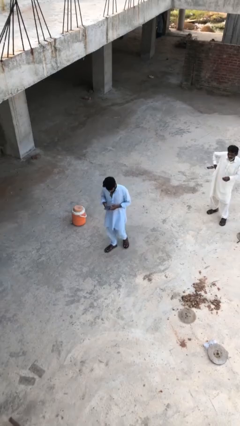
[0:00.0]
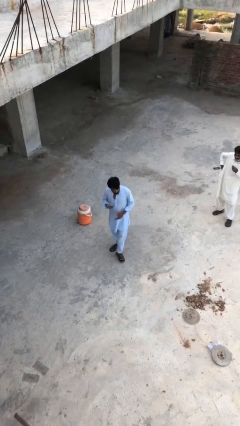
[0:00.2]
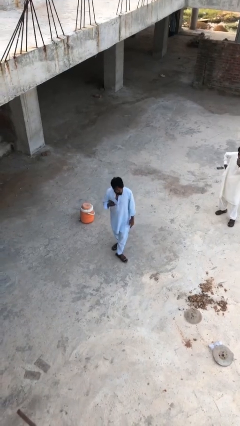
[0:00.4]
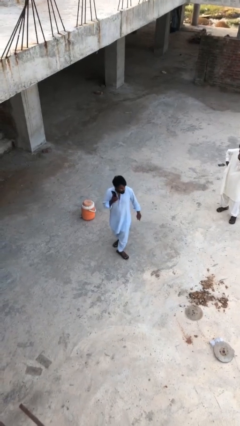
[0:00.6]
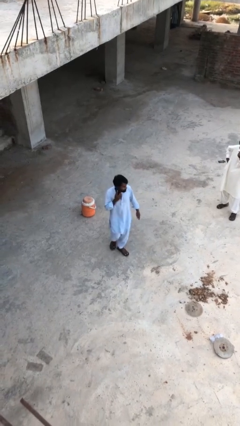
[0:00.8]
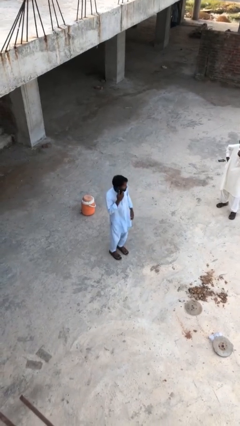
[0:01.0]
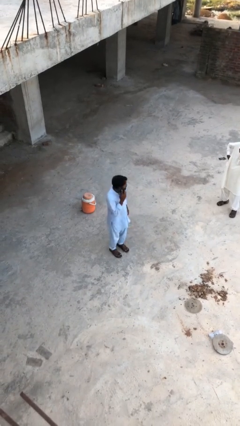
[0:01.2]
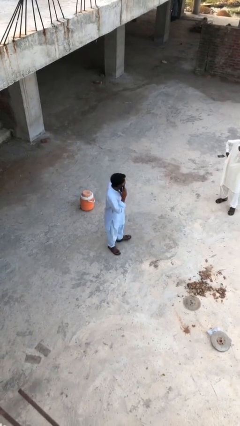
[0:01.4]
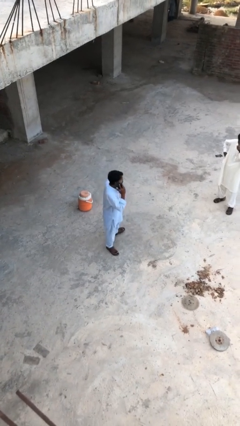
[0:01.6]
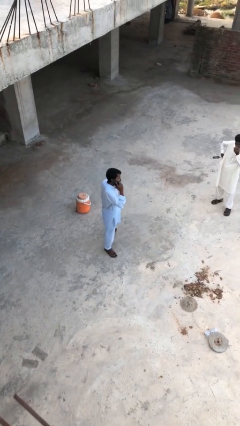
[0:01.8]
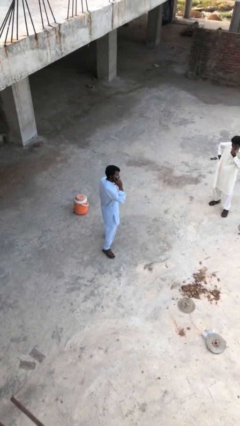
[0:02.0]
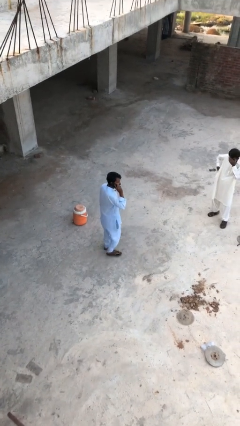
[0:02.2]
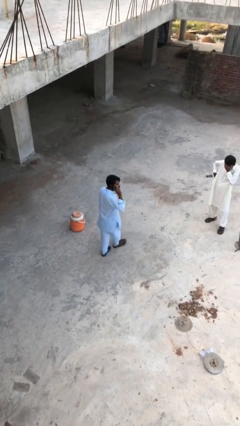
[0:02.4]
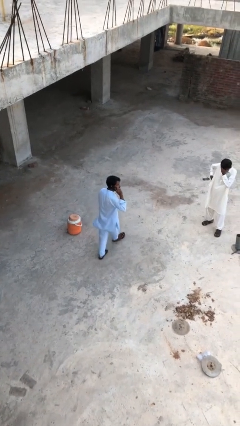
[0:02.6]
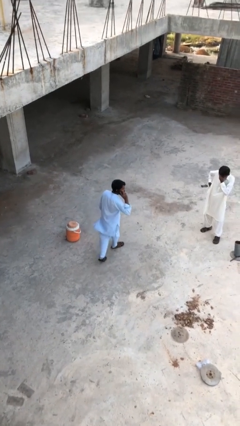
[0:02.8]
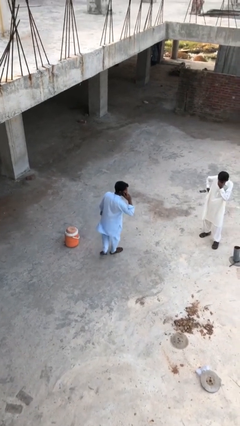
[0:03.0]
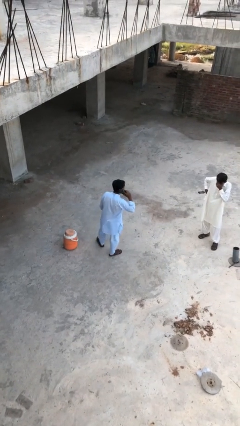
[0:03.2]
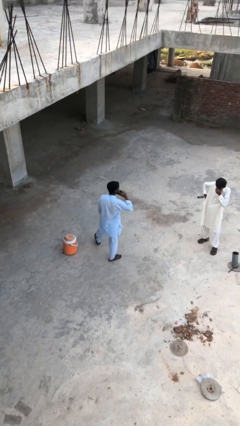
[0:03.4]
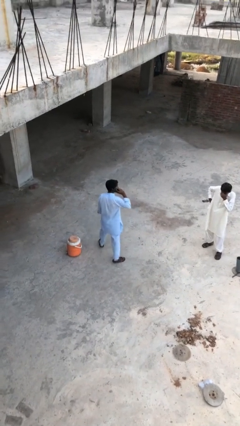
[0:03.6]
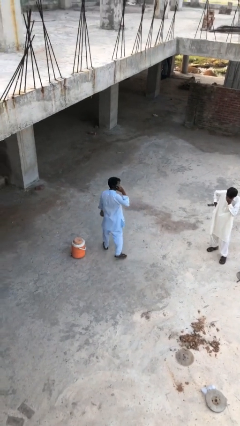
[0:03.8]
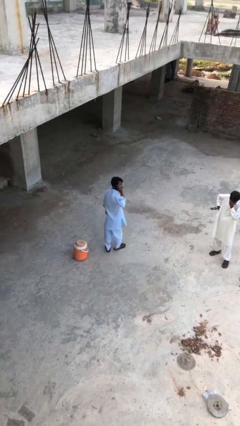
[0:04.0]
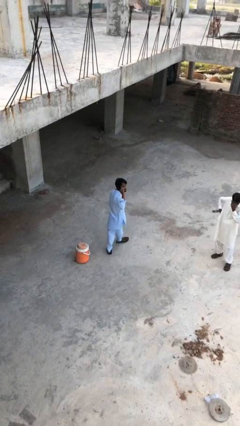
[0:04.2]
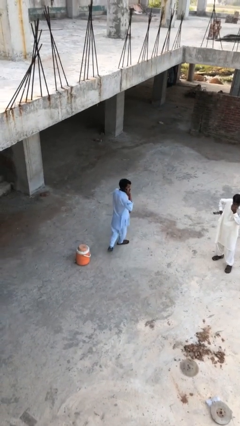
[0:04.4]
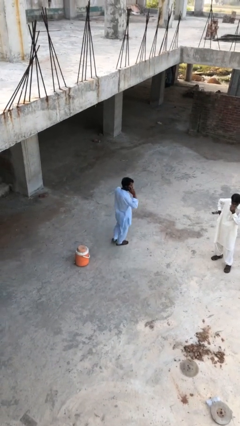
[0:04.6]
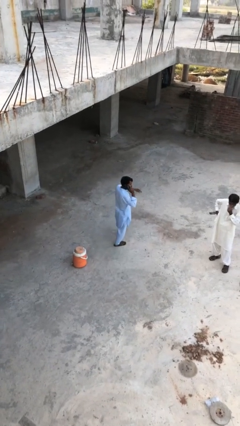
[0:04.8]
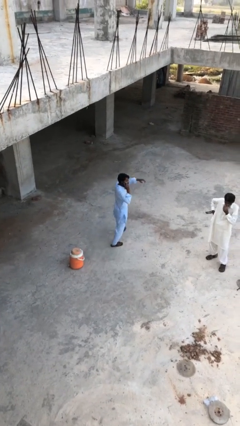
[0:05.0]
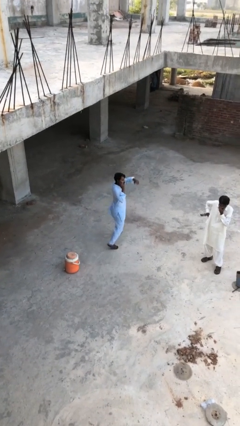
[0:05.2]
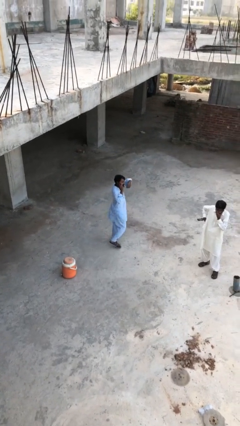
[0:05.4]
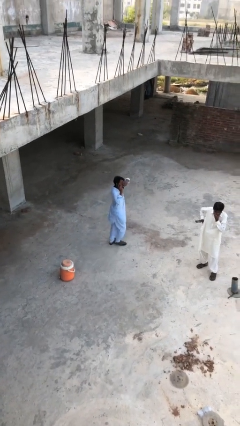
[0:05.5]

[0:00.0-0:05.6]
person talks on phone

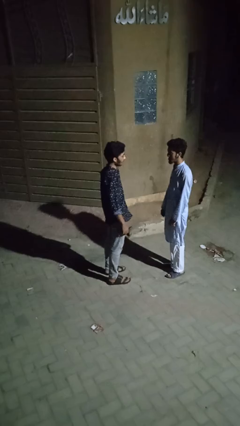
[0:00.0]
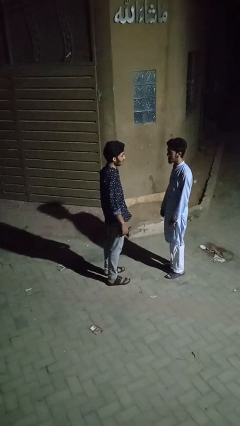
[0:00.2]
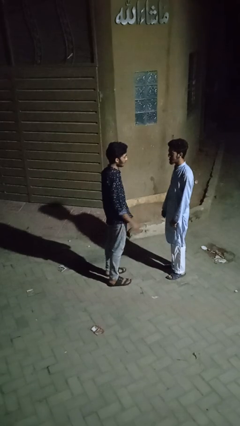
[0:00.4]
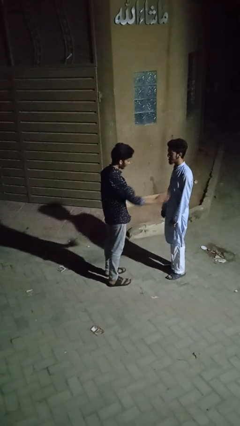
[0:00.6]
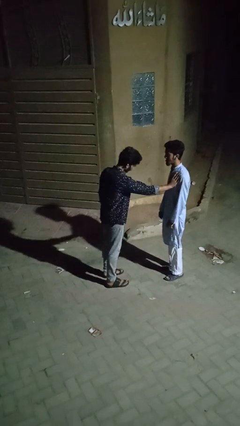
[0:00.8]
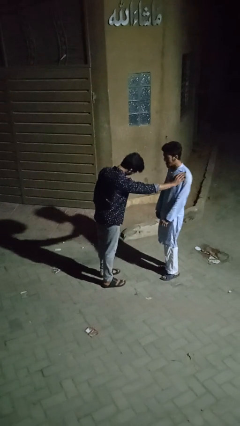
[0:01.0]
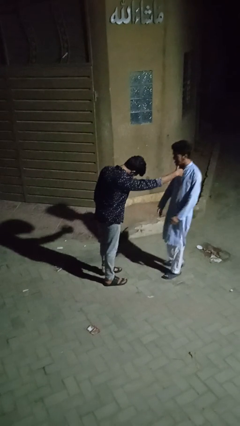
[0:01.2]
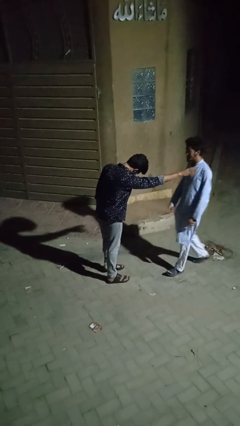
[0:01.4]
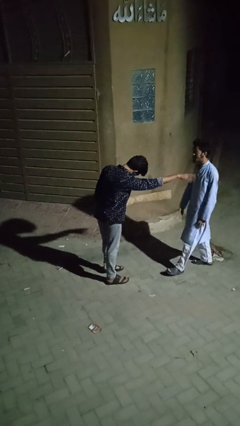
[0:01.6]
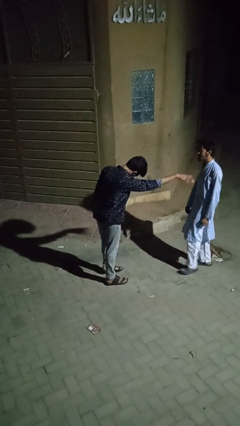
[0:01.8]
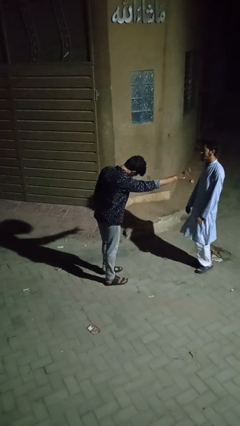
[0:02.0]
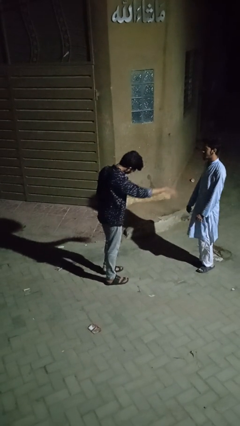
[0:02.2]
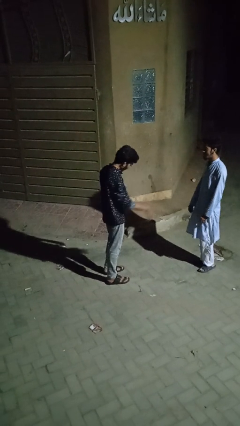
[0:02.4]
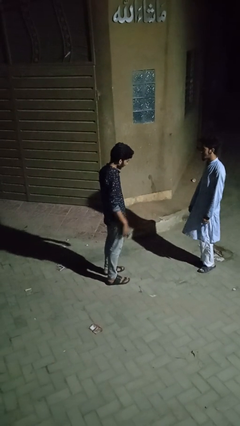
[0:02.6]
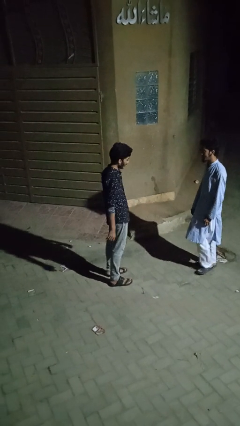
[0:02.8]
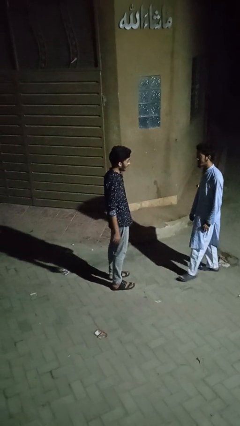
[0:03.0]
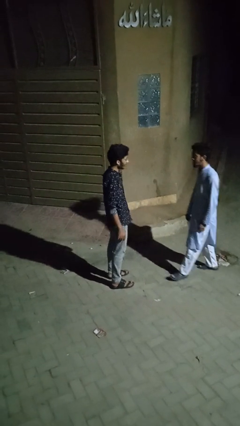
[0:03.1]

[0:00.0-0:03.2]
person shoves person

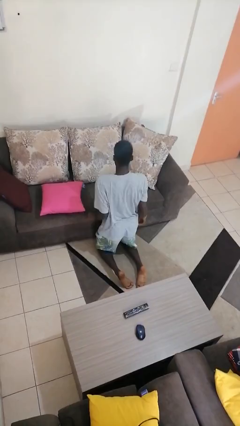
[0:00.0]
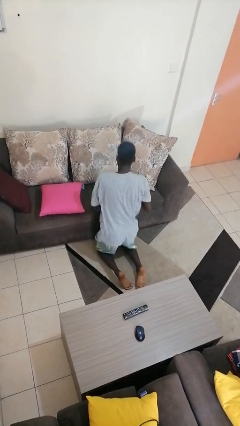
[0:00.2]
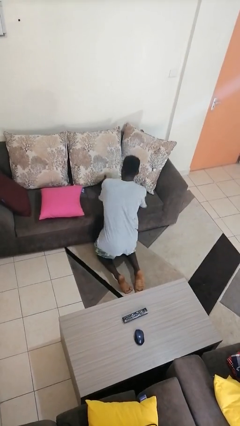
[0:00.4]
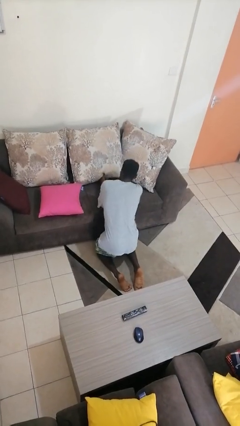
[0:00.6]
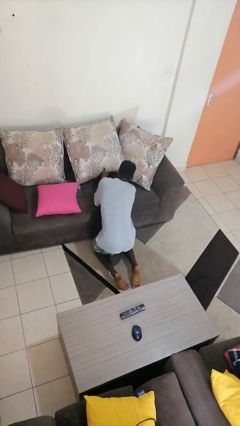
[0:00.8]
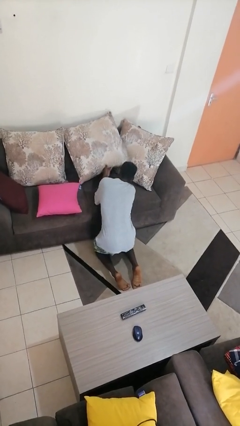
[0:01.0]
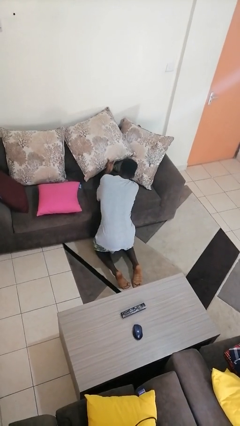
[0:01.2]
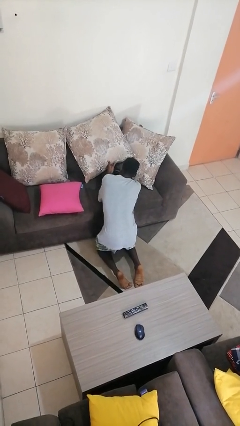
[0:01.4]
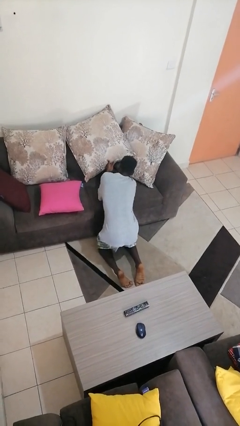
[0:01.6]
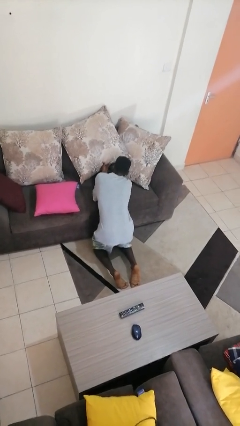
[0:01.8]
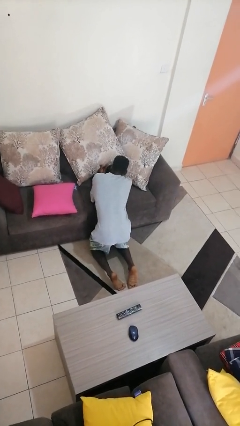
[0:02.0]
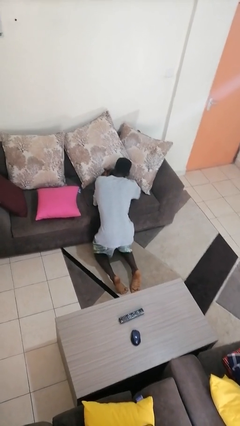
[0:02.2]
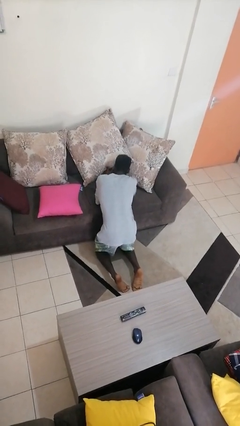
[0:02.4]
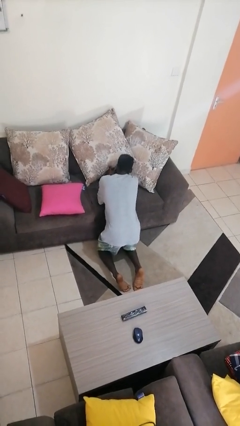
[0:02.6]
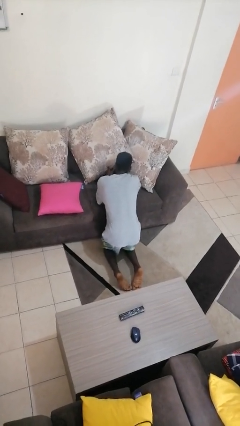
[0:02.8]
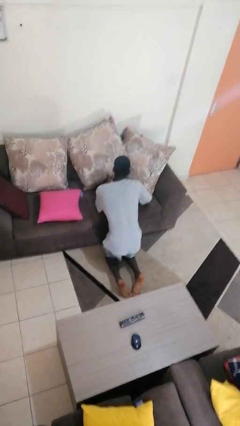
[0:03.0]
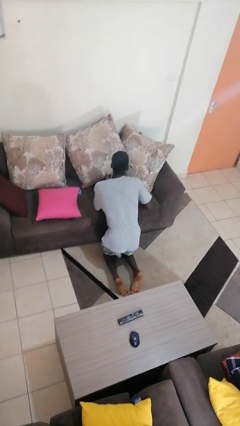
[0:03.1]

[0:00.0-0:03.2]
person searches in couch

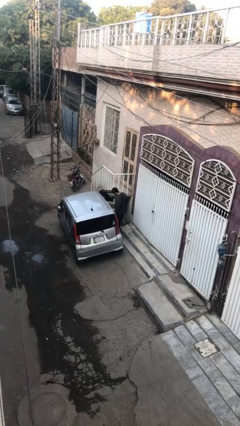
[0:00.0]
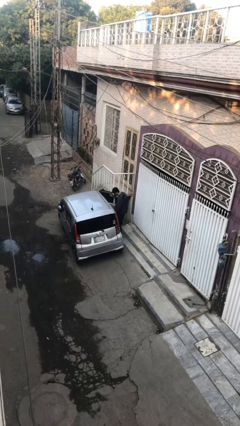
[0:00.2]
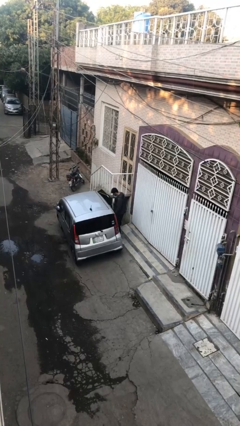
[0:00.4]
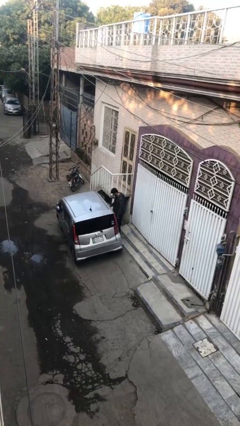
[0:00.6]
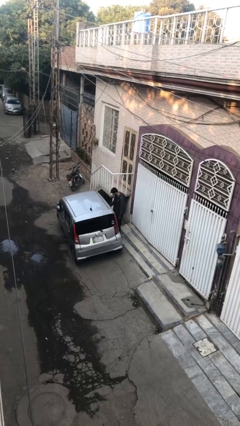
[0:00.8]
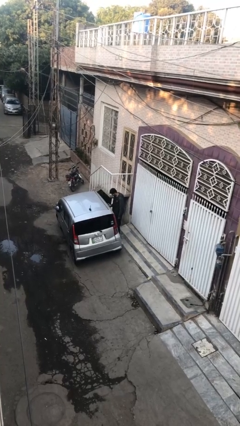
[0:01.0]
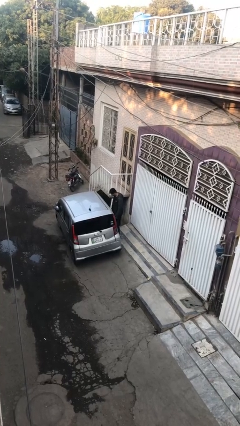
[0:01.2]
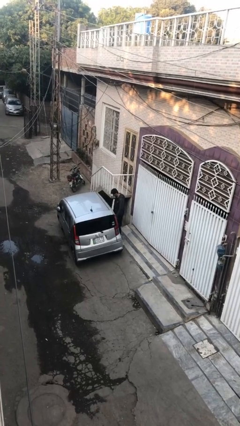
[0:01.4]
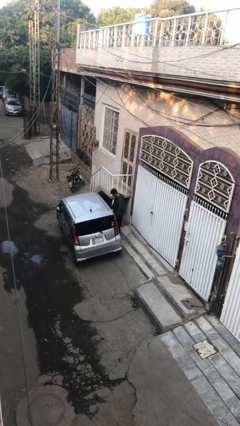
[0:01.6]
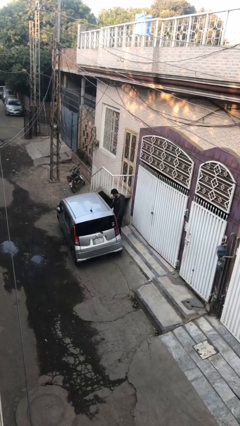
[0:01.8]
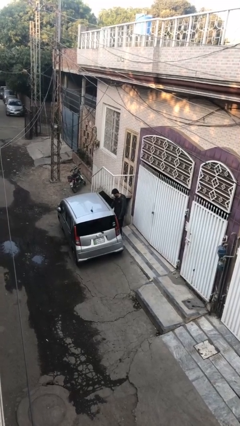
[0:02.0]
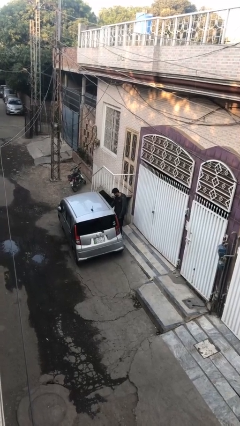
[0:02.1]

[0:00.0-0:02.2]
person closes car door

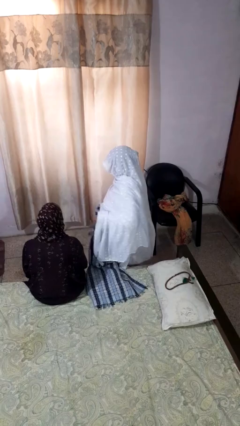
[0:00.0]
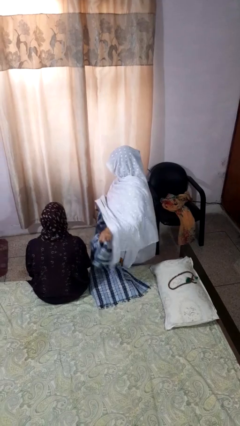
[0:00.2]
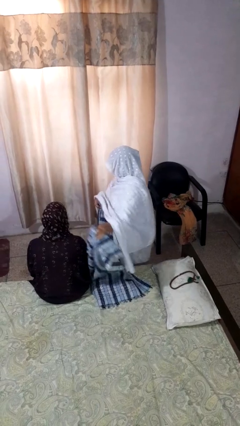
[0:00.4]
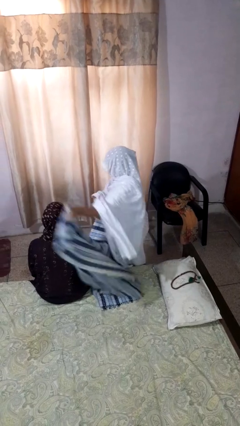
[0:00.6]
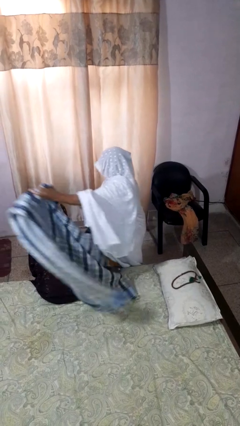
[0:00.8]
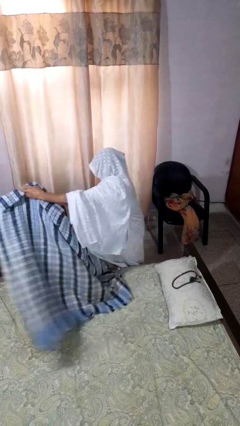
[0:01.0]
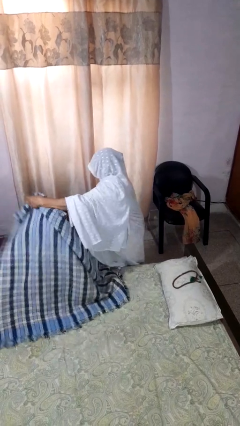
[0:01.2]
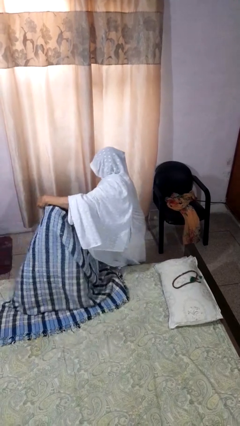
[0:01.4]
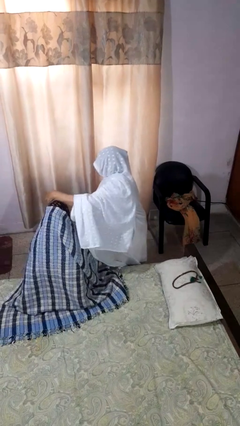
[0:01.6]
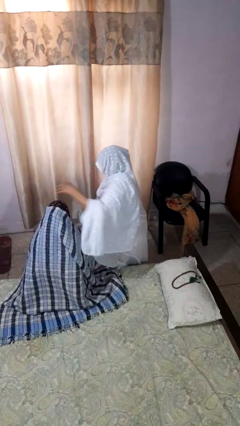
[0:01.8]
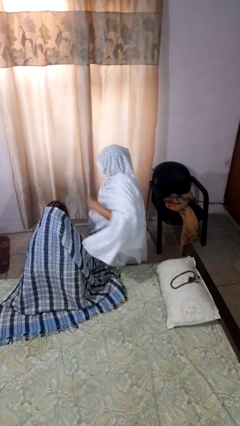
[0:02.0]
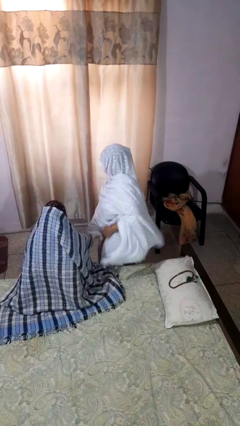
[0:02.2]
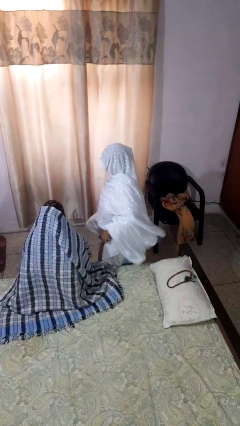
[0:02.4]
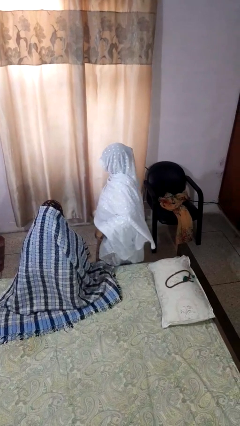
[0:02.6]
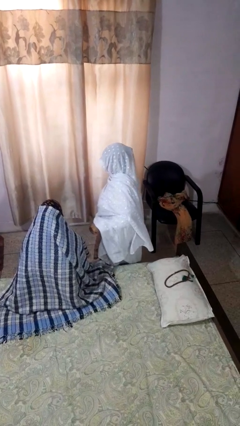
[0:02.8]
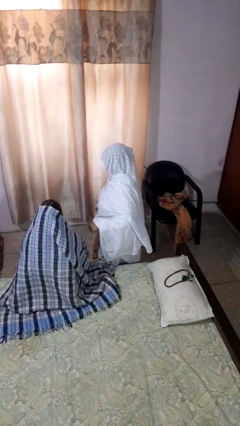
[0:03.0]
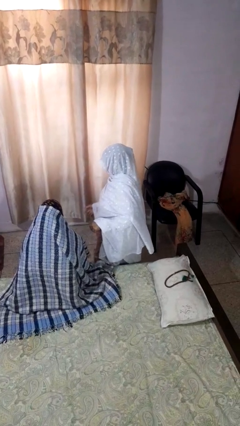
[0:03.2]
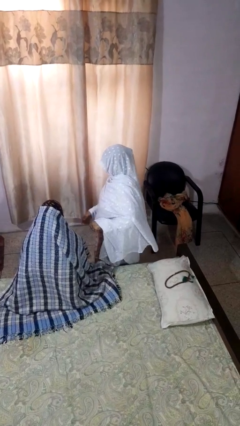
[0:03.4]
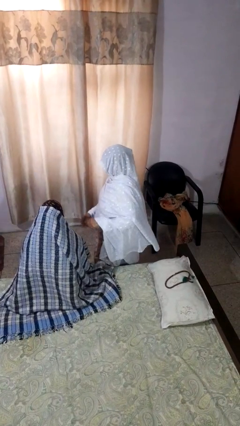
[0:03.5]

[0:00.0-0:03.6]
person covers friend with blanket
